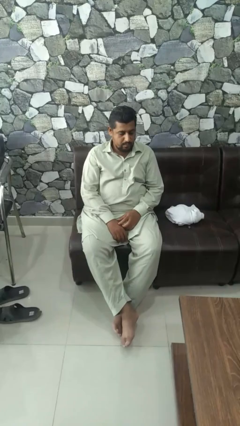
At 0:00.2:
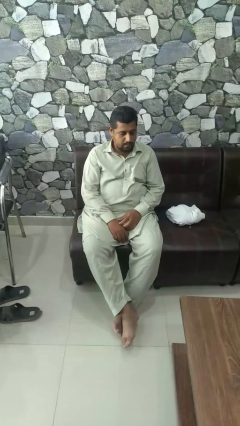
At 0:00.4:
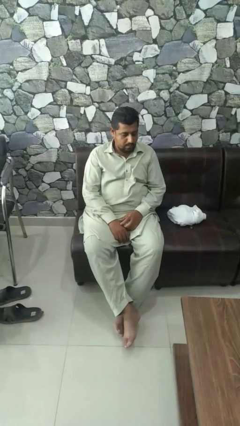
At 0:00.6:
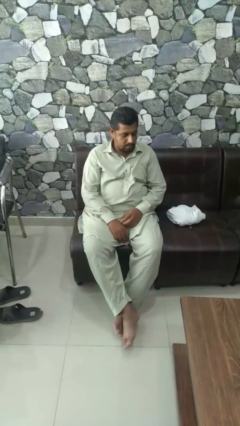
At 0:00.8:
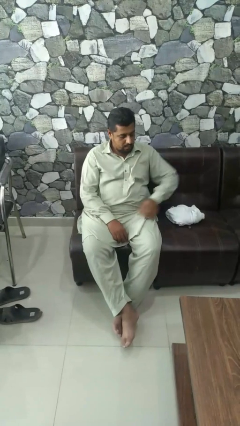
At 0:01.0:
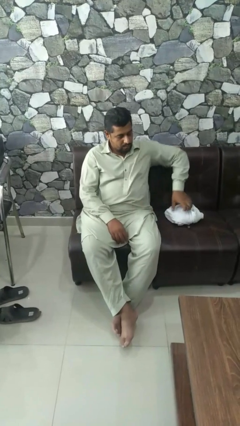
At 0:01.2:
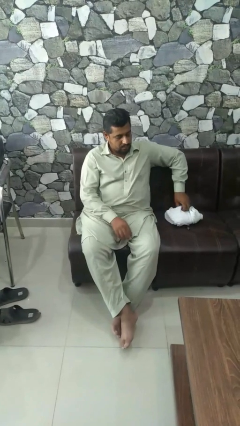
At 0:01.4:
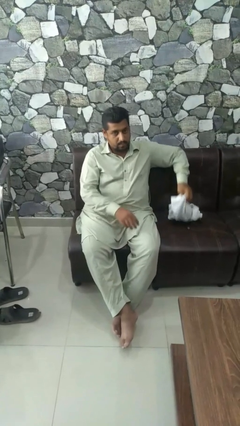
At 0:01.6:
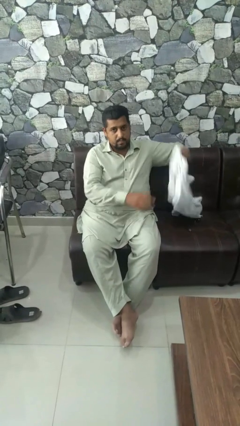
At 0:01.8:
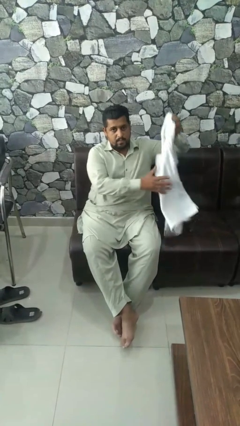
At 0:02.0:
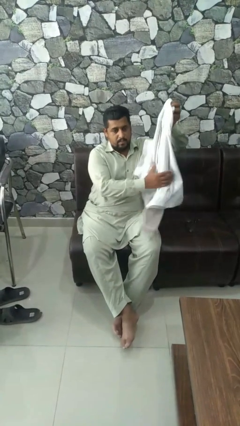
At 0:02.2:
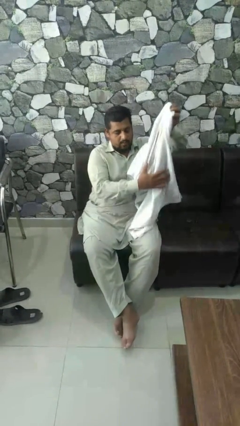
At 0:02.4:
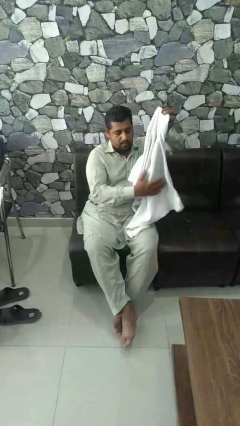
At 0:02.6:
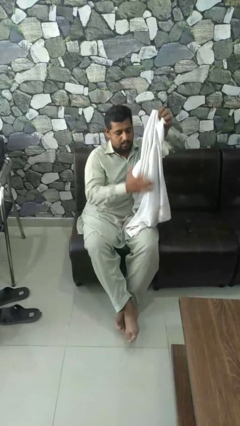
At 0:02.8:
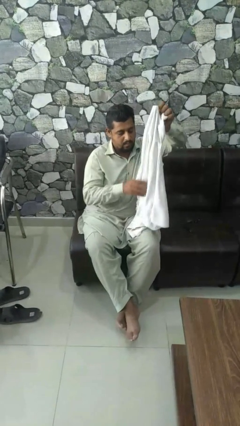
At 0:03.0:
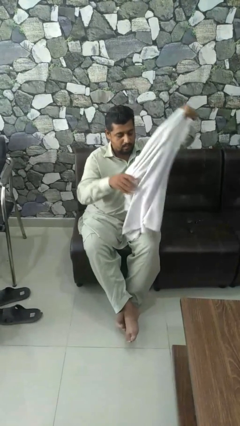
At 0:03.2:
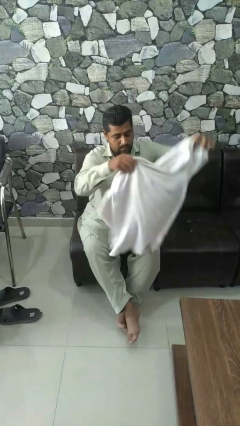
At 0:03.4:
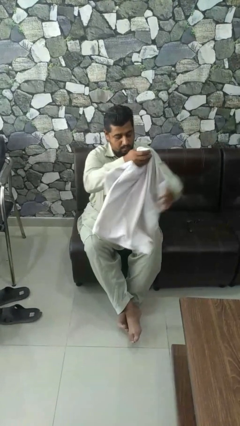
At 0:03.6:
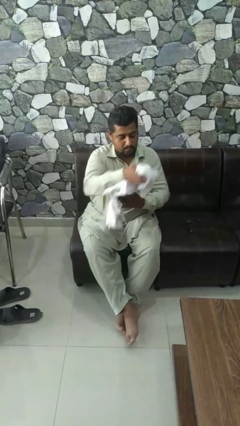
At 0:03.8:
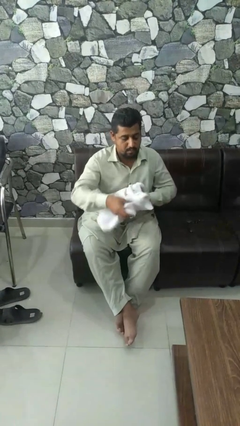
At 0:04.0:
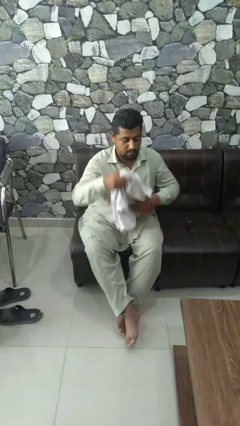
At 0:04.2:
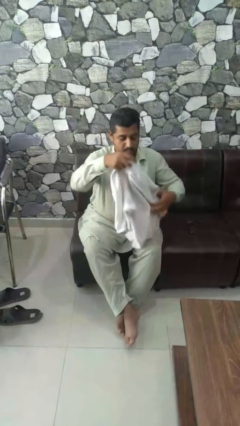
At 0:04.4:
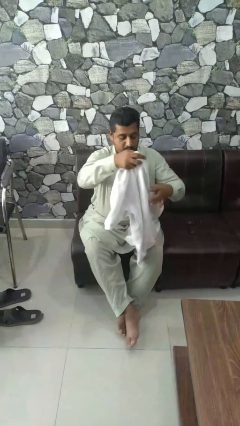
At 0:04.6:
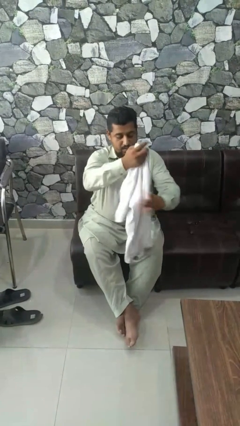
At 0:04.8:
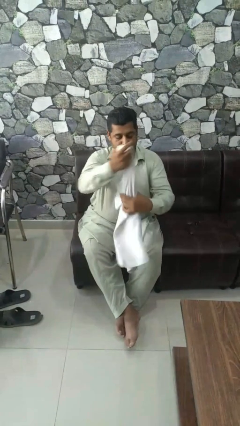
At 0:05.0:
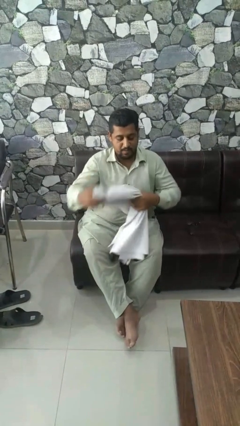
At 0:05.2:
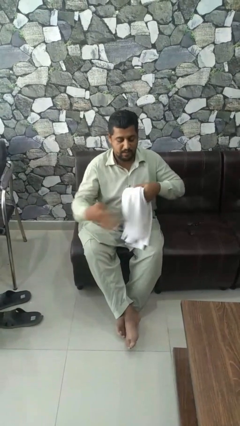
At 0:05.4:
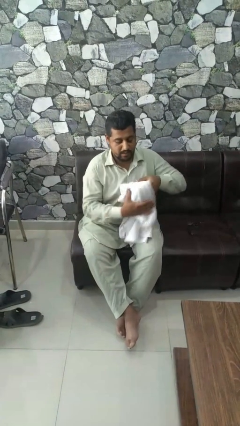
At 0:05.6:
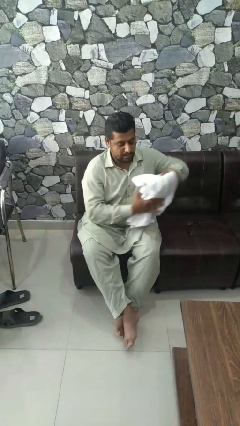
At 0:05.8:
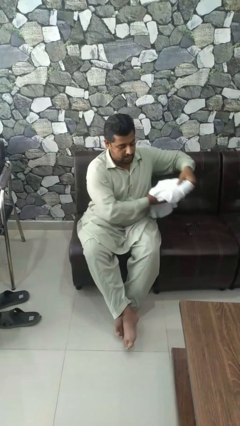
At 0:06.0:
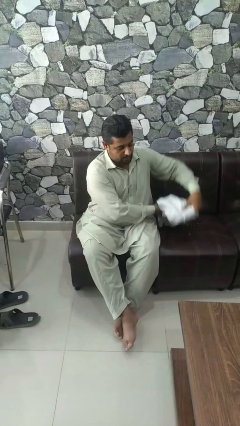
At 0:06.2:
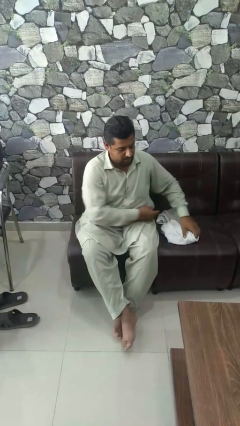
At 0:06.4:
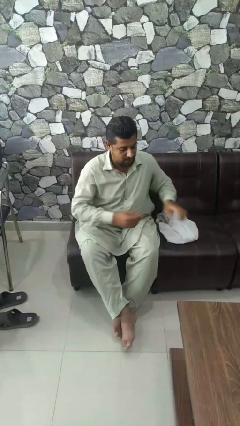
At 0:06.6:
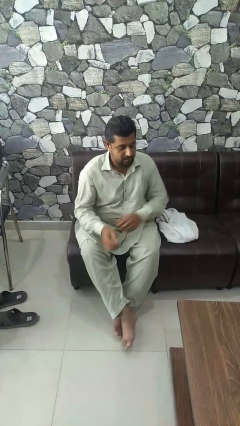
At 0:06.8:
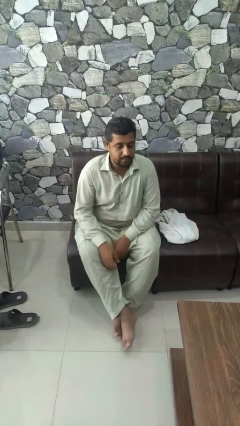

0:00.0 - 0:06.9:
person folds shirt

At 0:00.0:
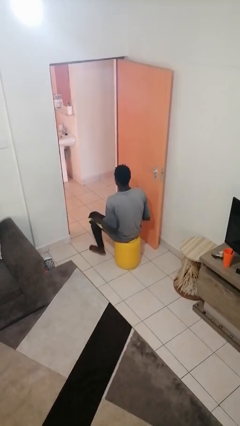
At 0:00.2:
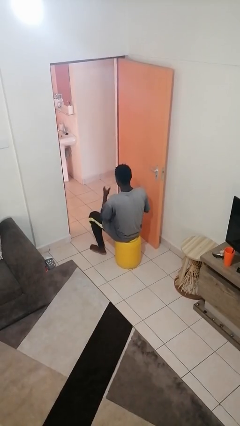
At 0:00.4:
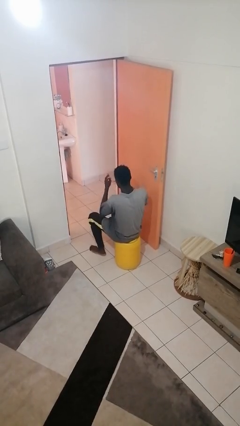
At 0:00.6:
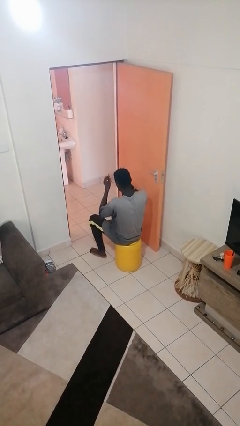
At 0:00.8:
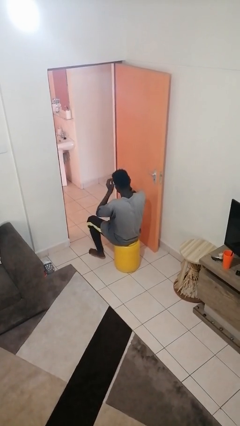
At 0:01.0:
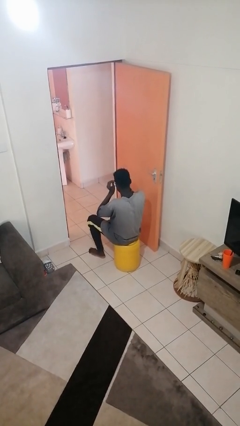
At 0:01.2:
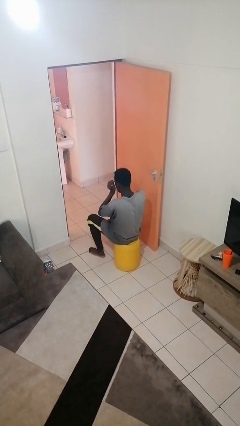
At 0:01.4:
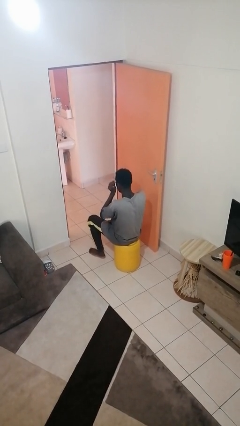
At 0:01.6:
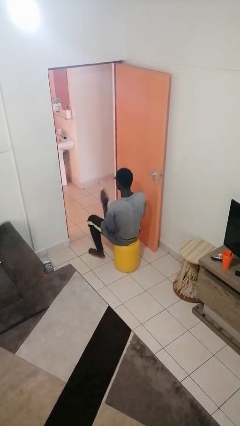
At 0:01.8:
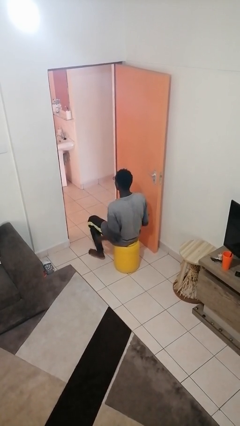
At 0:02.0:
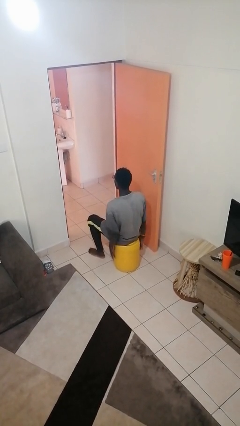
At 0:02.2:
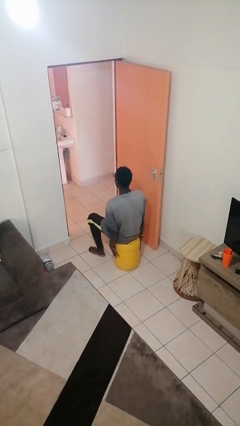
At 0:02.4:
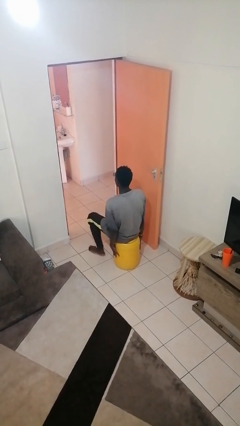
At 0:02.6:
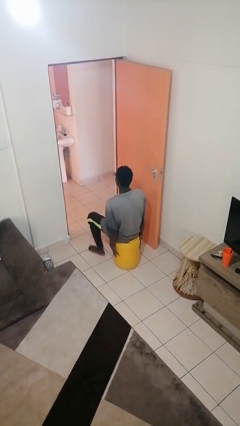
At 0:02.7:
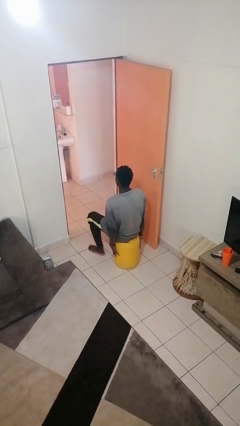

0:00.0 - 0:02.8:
person puts on glasses

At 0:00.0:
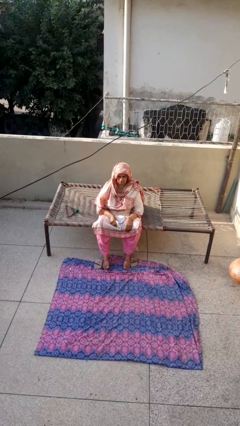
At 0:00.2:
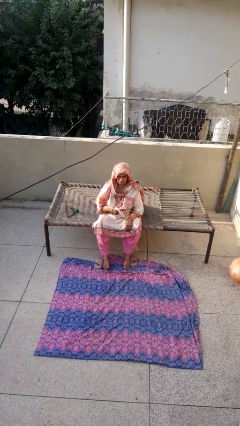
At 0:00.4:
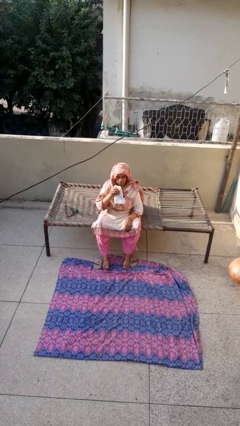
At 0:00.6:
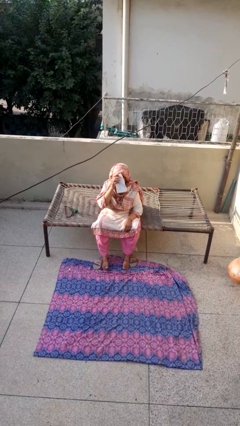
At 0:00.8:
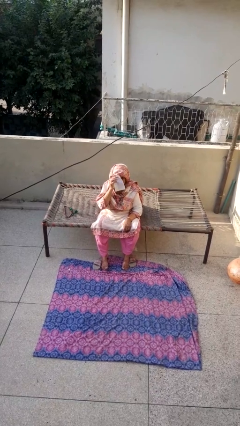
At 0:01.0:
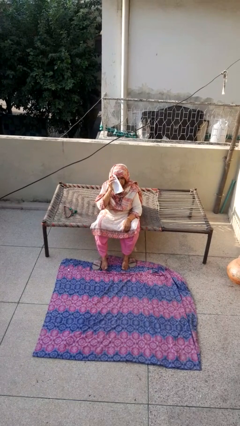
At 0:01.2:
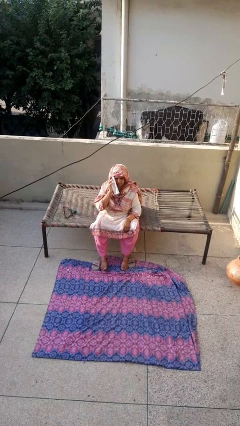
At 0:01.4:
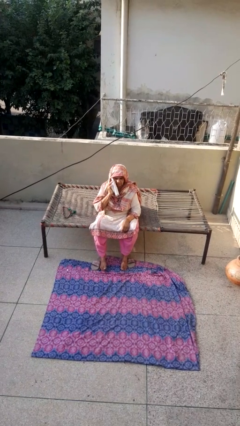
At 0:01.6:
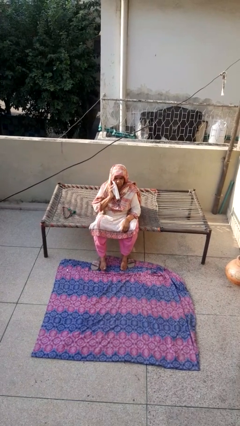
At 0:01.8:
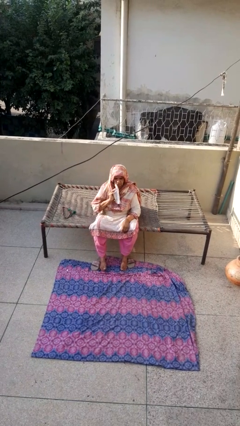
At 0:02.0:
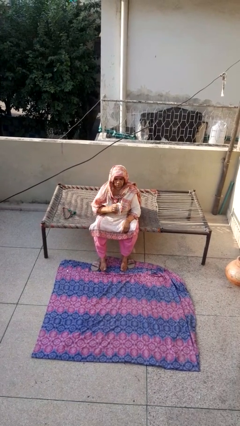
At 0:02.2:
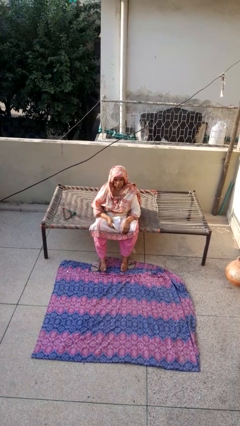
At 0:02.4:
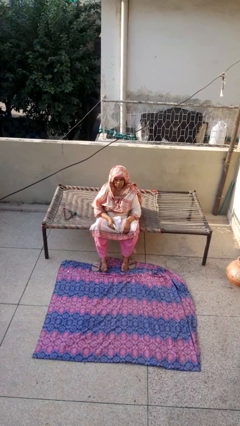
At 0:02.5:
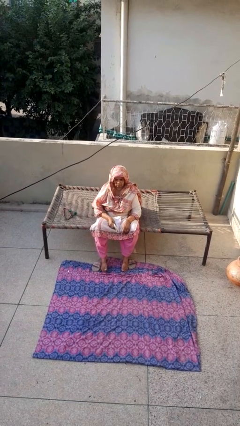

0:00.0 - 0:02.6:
person wipes mouth with napkin

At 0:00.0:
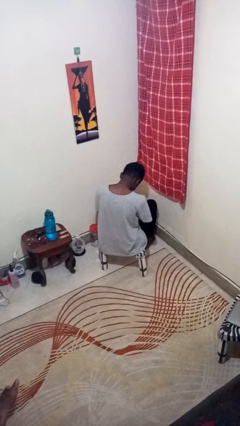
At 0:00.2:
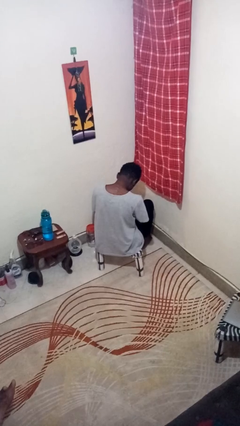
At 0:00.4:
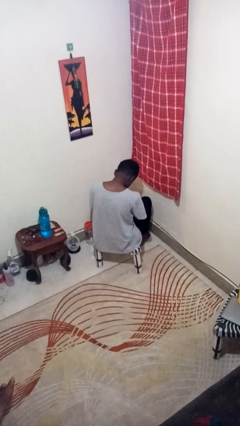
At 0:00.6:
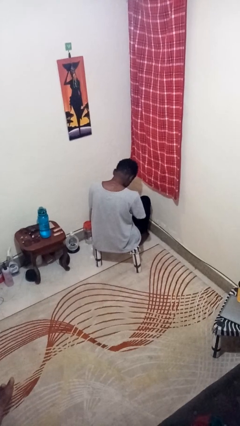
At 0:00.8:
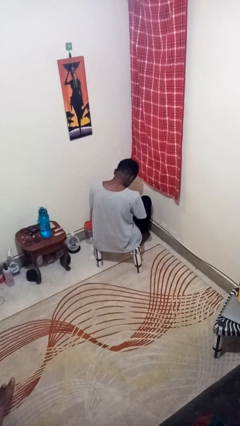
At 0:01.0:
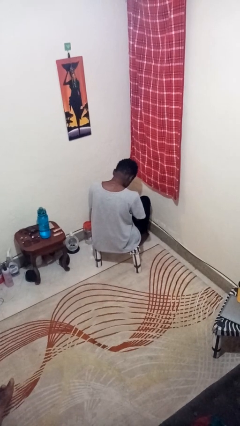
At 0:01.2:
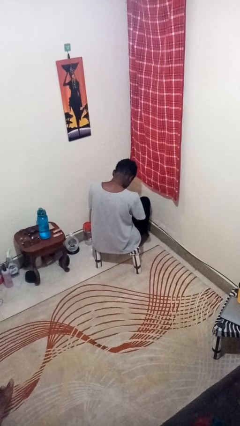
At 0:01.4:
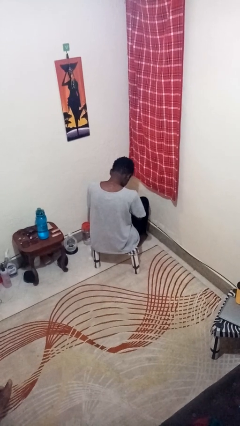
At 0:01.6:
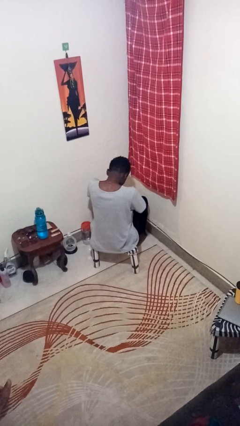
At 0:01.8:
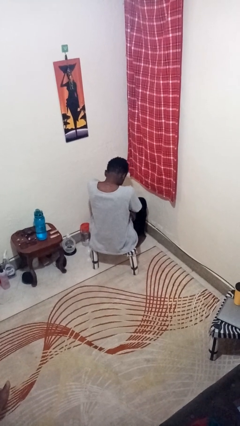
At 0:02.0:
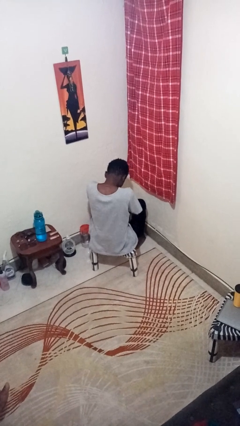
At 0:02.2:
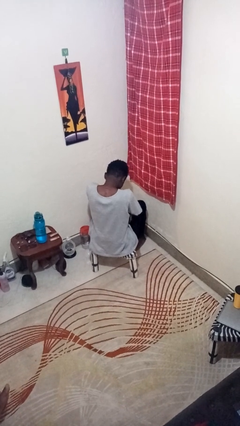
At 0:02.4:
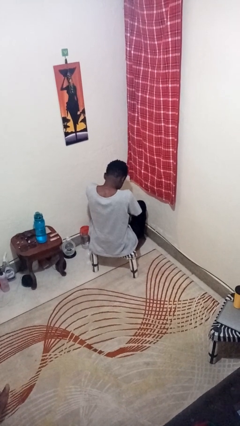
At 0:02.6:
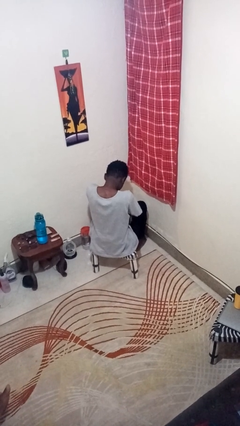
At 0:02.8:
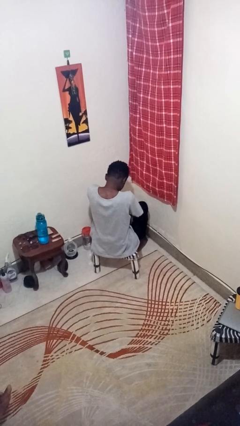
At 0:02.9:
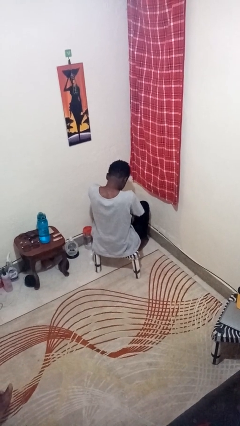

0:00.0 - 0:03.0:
person crosses arms

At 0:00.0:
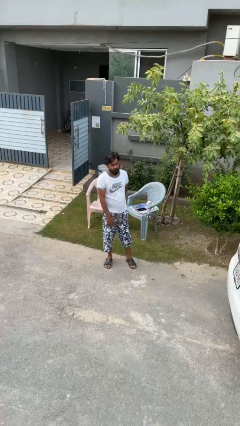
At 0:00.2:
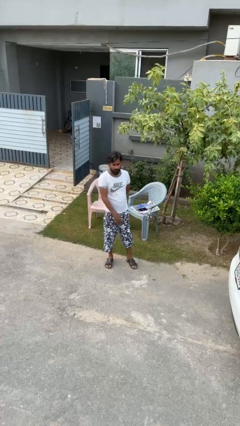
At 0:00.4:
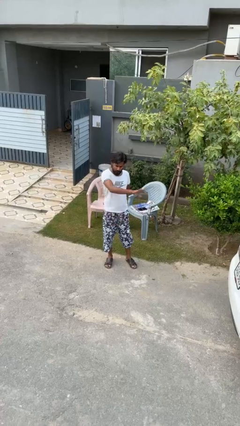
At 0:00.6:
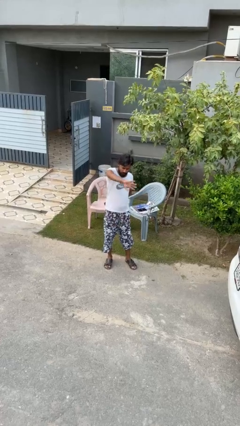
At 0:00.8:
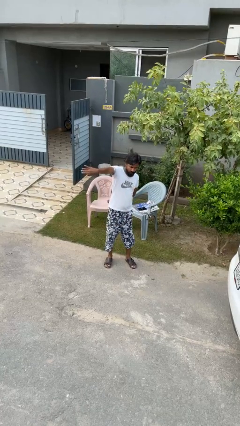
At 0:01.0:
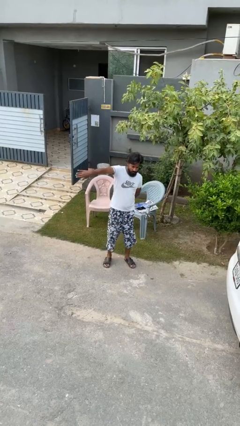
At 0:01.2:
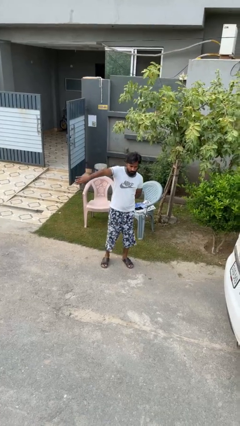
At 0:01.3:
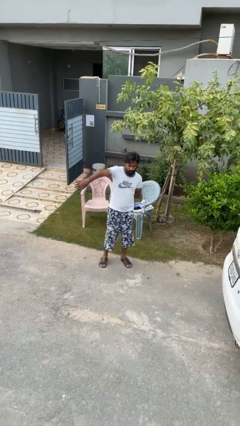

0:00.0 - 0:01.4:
person gestures swipe right

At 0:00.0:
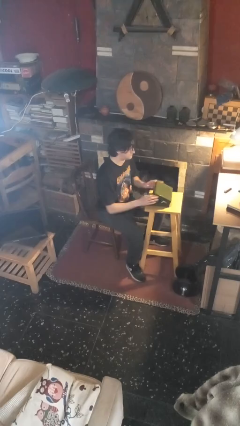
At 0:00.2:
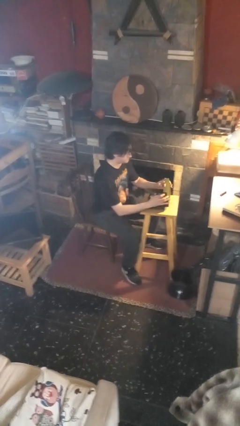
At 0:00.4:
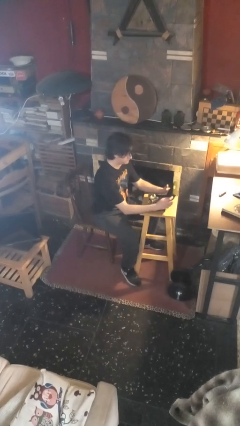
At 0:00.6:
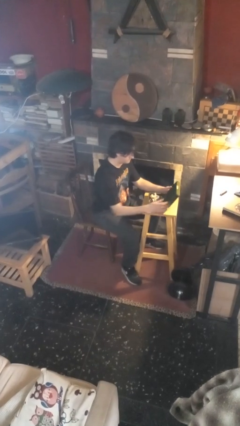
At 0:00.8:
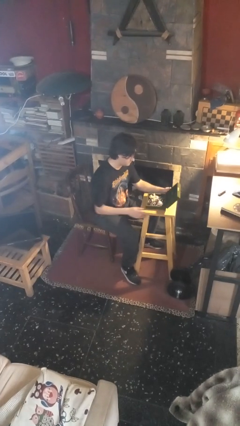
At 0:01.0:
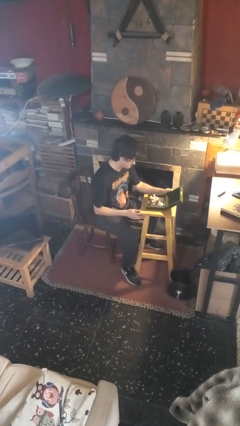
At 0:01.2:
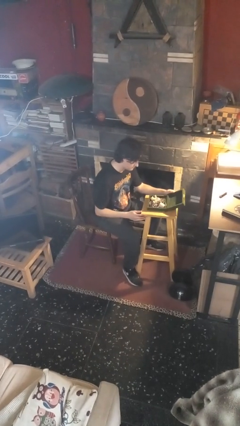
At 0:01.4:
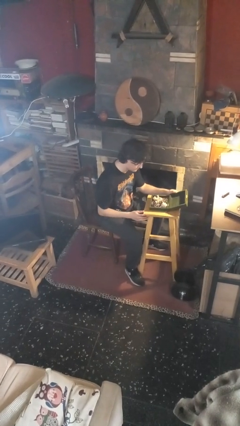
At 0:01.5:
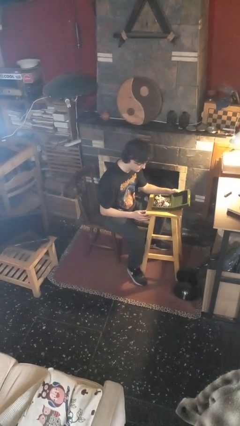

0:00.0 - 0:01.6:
person opens jewelry box
